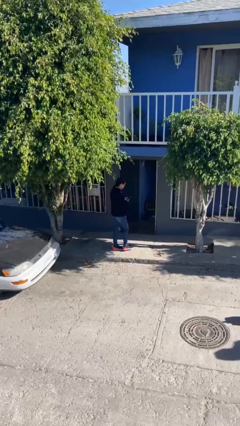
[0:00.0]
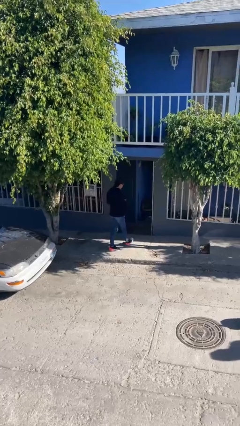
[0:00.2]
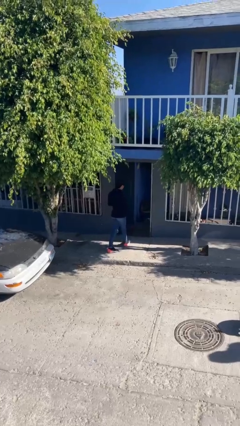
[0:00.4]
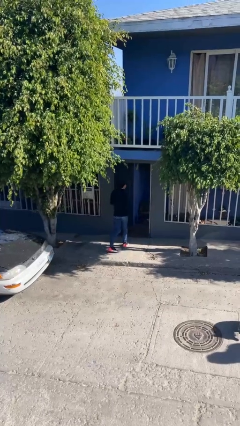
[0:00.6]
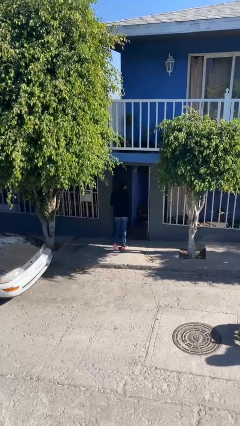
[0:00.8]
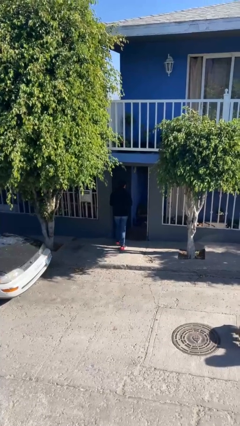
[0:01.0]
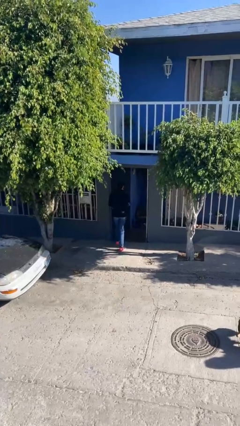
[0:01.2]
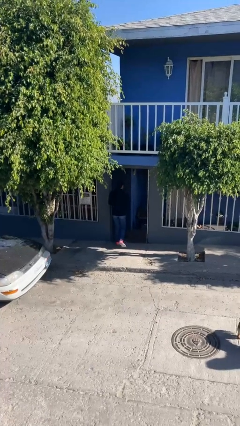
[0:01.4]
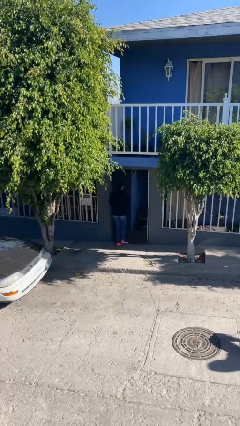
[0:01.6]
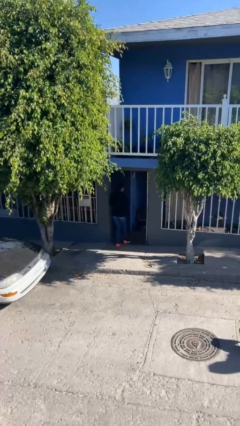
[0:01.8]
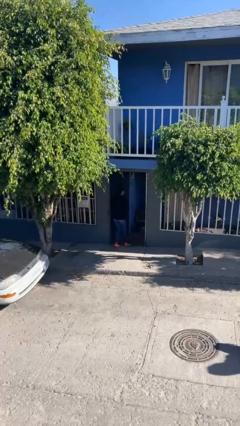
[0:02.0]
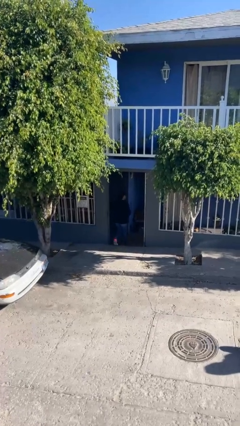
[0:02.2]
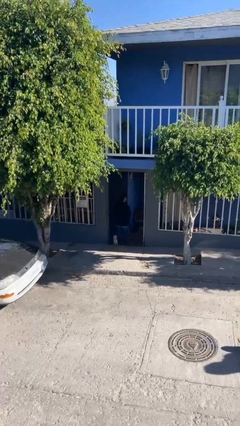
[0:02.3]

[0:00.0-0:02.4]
person exits scene through structure

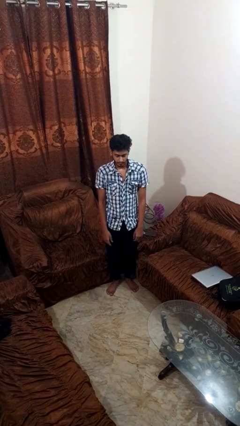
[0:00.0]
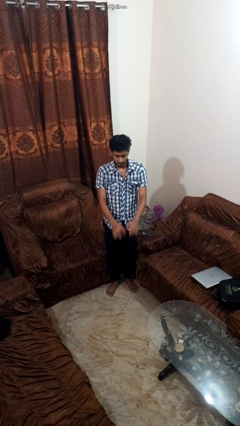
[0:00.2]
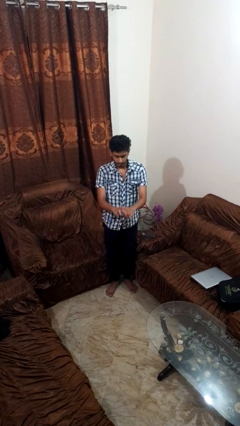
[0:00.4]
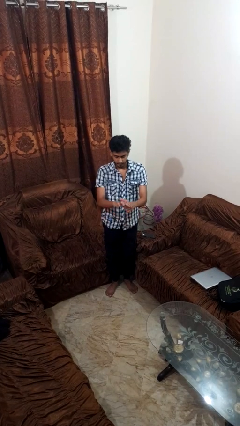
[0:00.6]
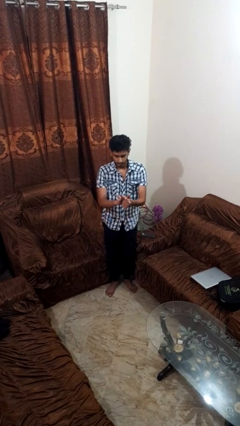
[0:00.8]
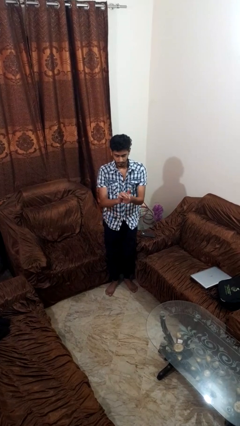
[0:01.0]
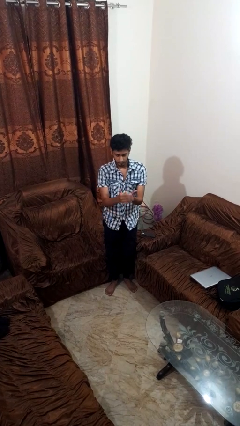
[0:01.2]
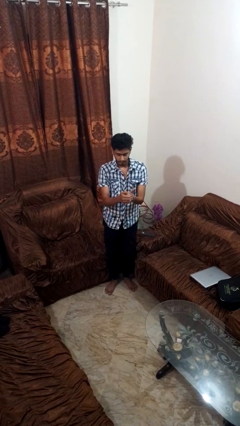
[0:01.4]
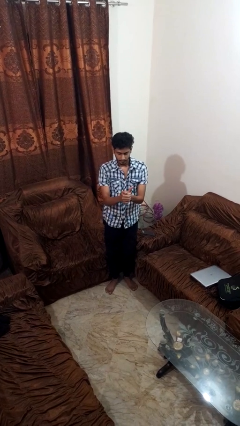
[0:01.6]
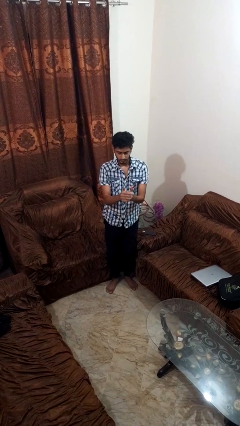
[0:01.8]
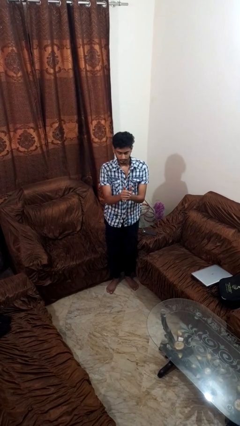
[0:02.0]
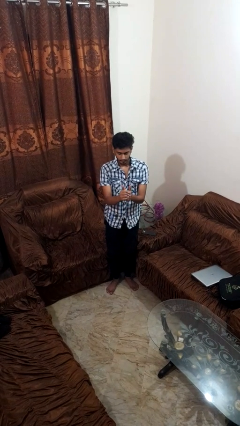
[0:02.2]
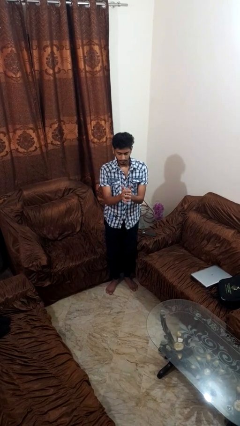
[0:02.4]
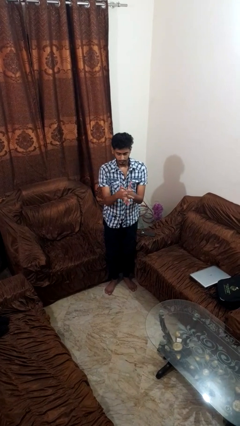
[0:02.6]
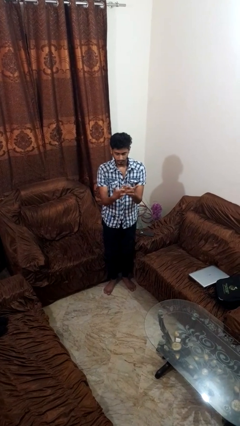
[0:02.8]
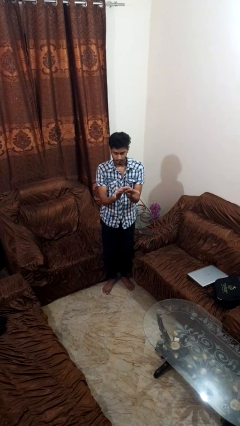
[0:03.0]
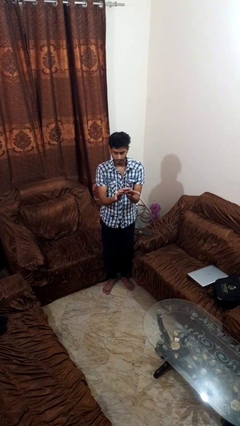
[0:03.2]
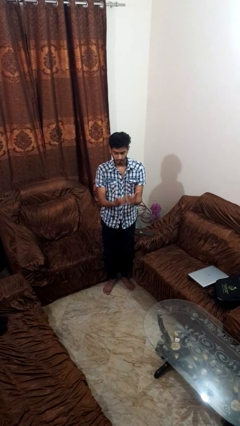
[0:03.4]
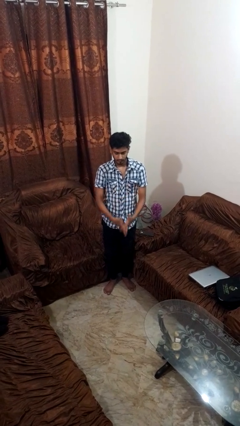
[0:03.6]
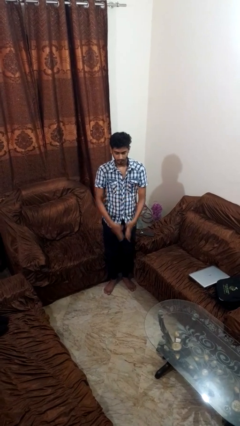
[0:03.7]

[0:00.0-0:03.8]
person cracks knuckles

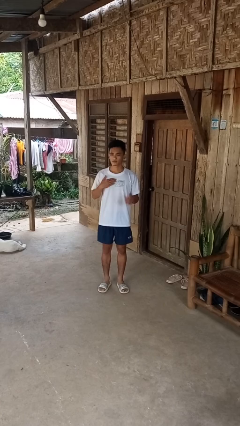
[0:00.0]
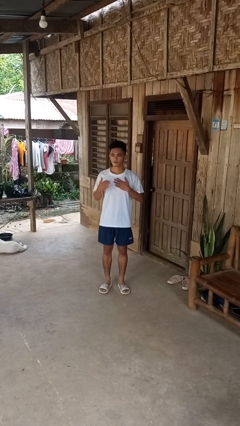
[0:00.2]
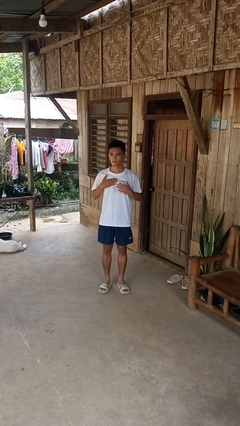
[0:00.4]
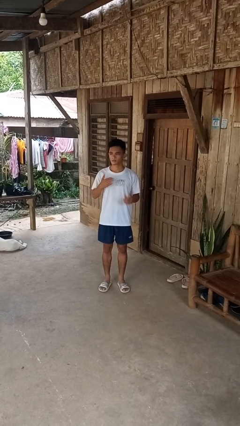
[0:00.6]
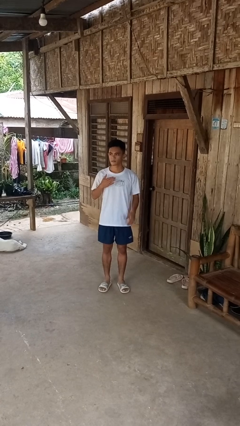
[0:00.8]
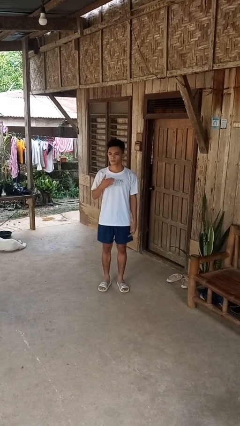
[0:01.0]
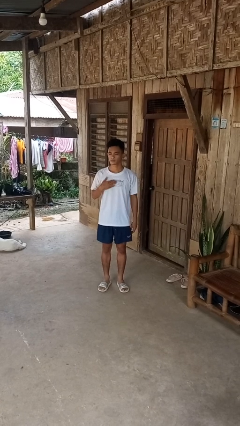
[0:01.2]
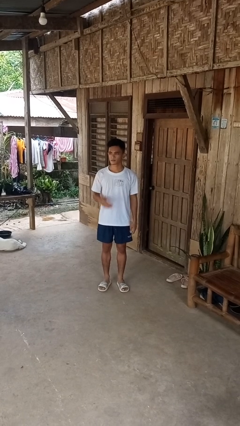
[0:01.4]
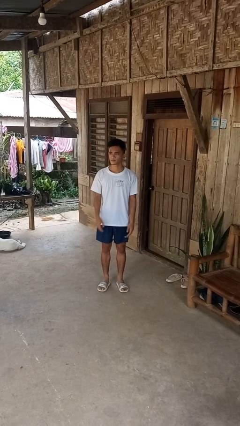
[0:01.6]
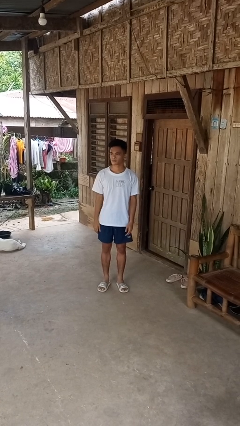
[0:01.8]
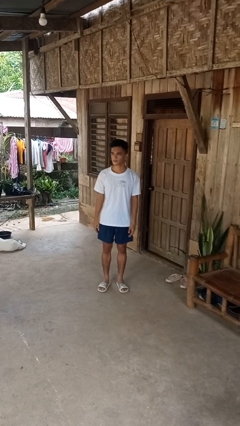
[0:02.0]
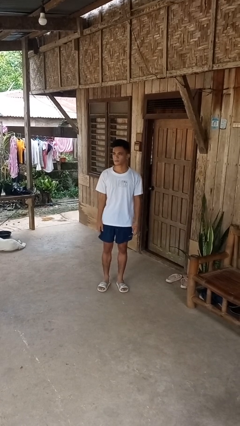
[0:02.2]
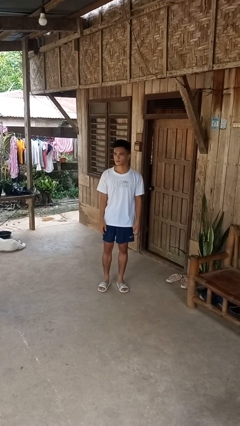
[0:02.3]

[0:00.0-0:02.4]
person drums on chest

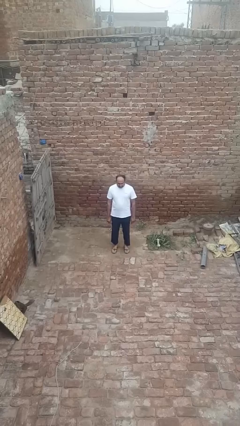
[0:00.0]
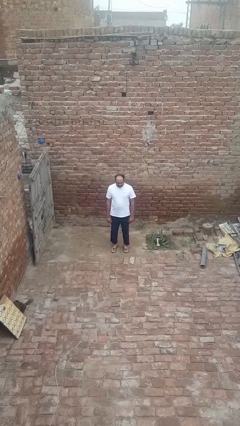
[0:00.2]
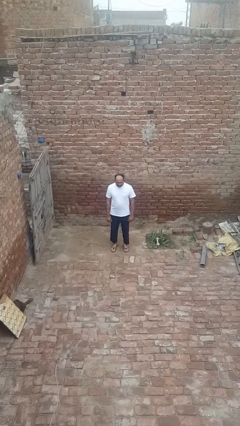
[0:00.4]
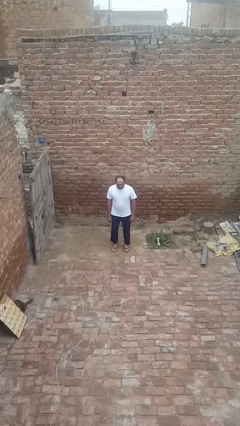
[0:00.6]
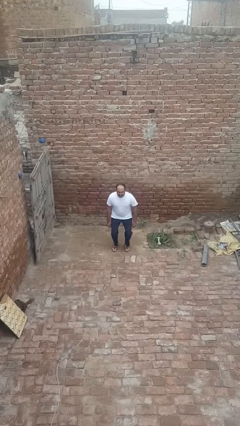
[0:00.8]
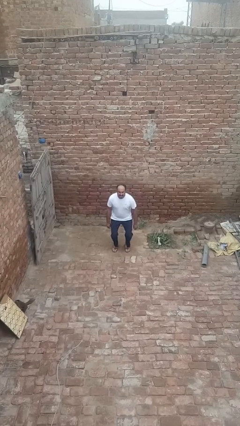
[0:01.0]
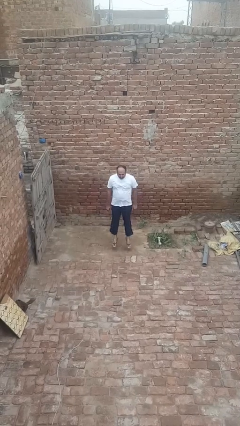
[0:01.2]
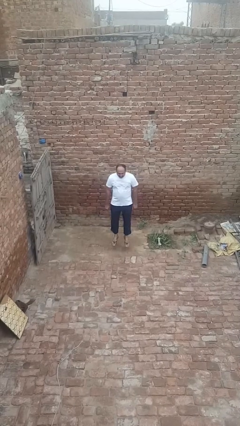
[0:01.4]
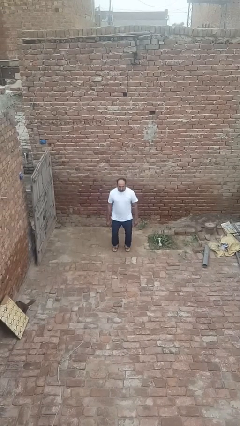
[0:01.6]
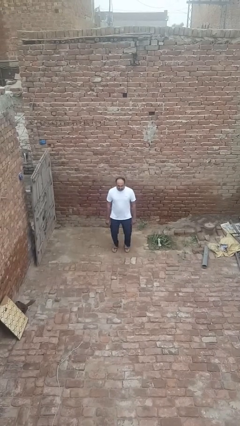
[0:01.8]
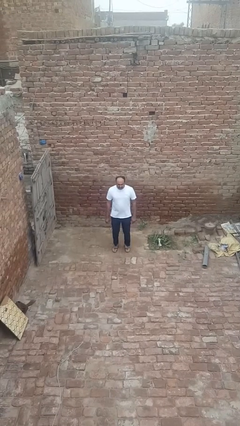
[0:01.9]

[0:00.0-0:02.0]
person jumps

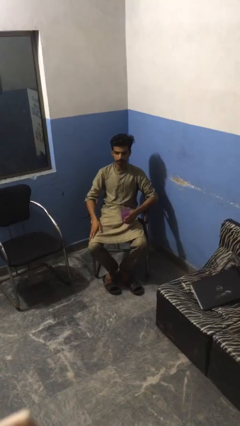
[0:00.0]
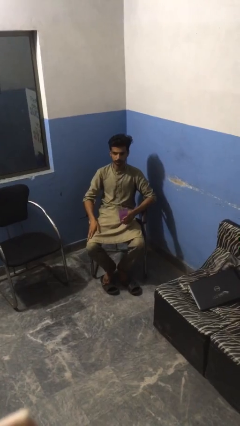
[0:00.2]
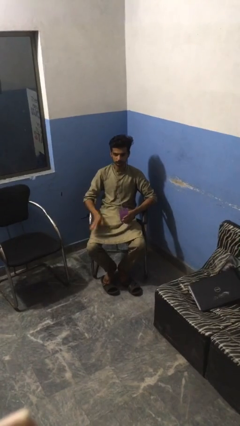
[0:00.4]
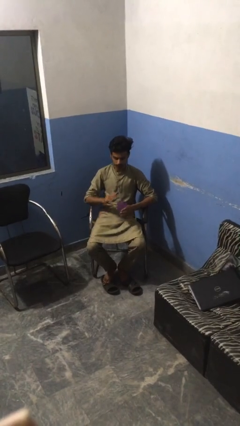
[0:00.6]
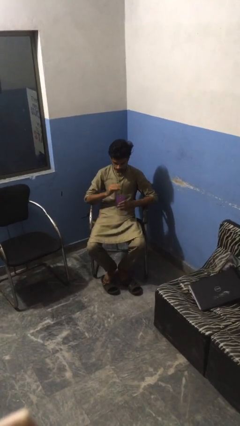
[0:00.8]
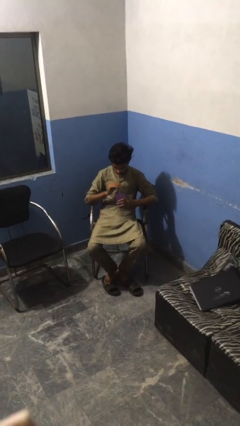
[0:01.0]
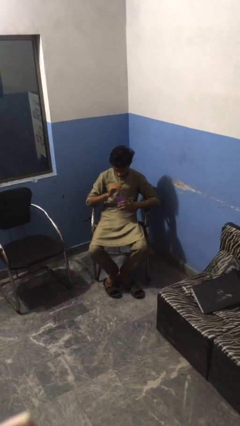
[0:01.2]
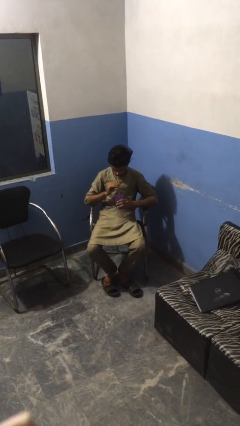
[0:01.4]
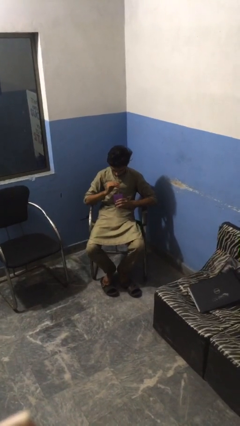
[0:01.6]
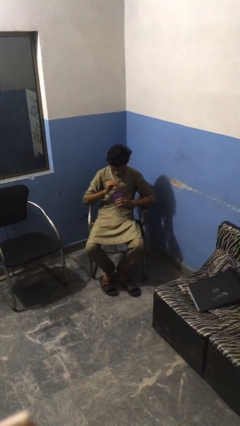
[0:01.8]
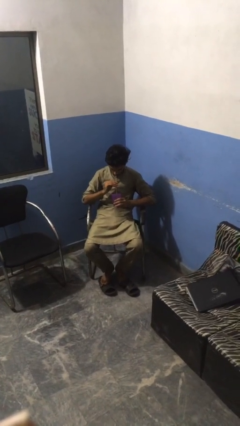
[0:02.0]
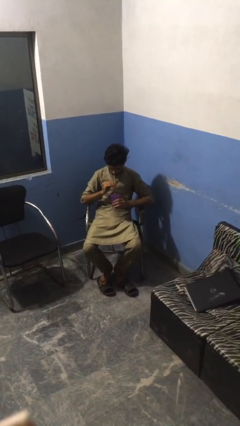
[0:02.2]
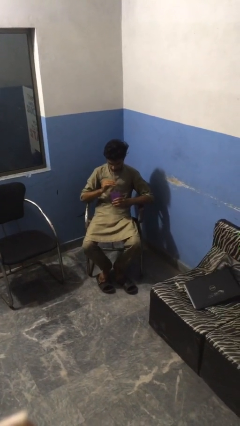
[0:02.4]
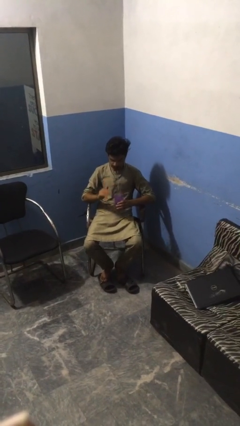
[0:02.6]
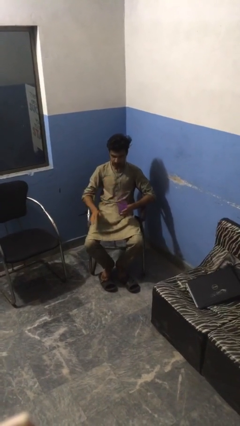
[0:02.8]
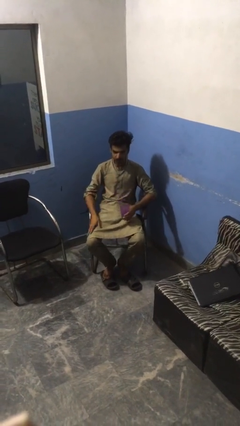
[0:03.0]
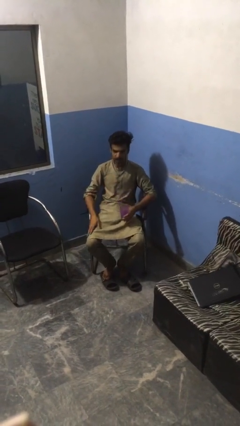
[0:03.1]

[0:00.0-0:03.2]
person drinks from straw

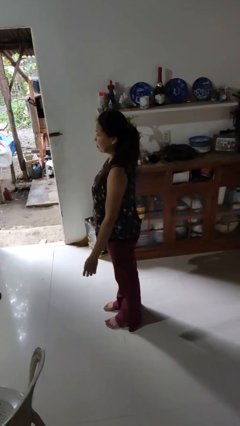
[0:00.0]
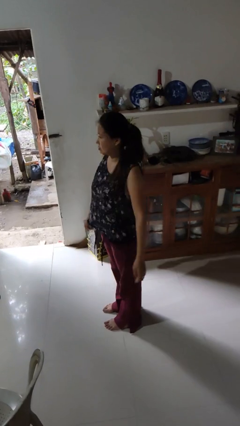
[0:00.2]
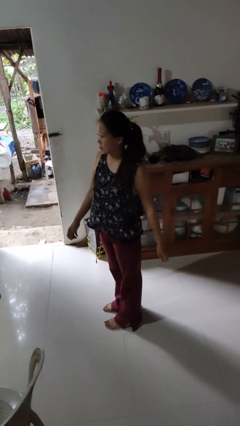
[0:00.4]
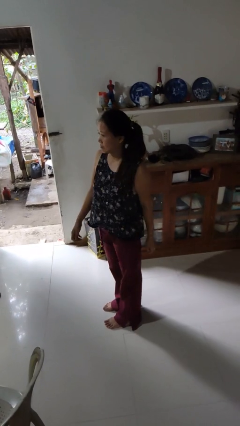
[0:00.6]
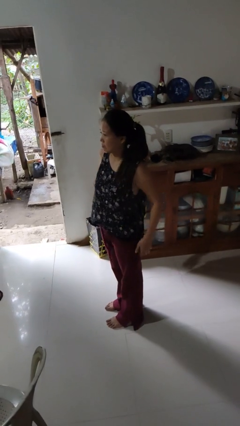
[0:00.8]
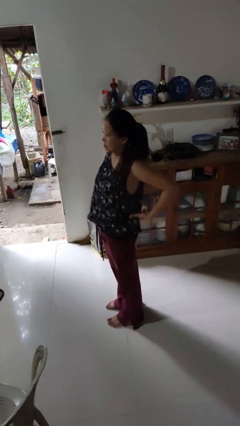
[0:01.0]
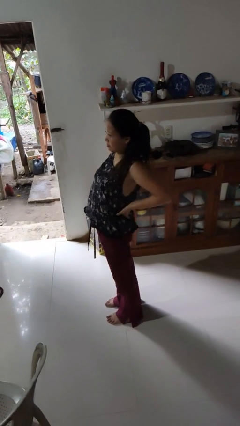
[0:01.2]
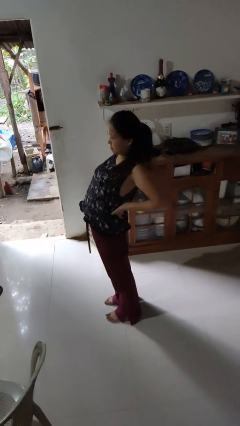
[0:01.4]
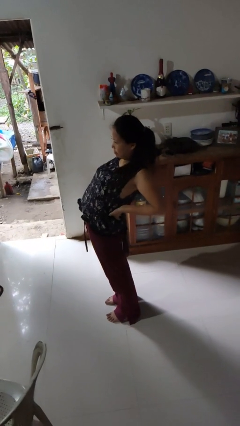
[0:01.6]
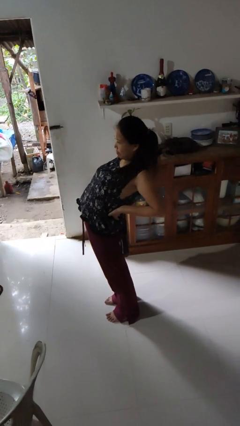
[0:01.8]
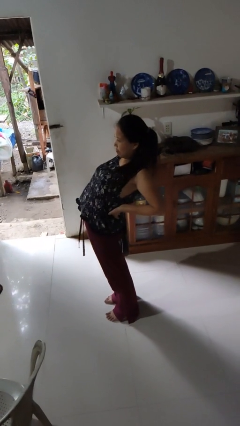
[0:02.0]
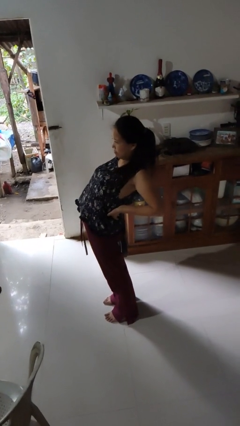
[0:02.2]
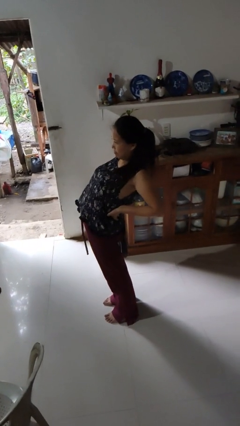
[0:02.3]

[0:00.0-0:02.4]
person stretches back

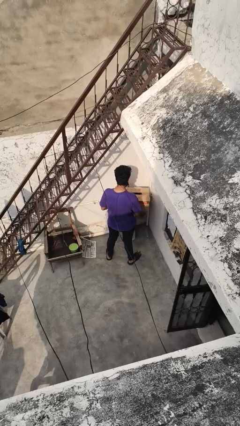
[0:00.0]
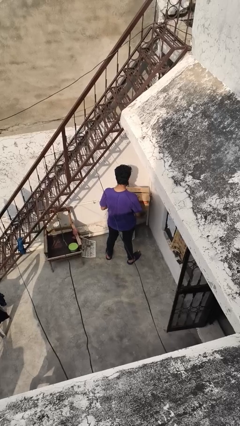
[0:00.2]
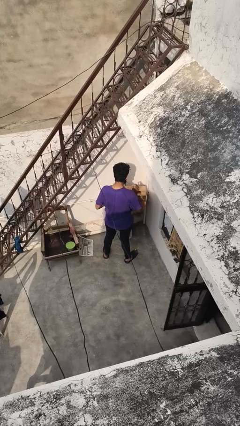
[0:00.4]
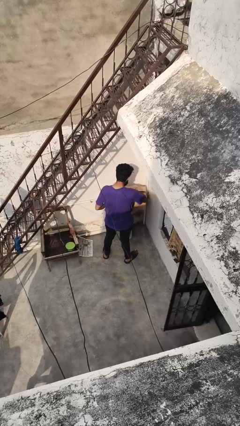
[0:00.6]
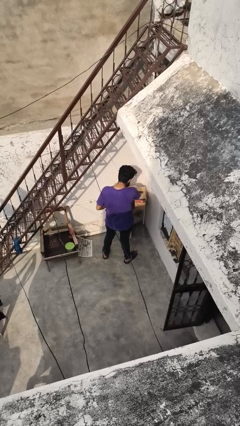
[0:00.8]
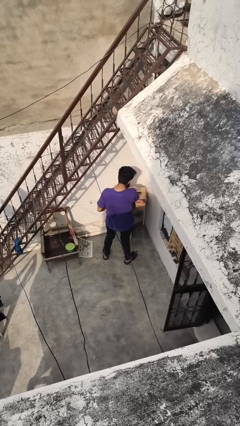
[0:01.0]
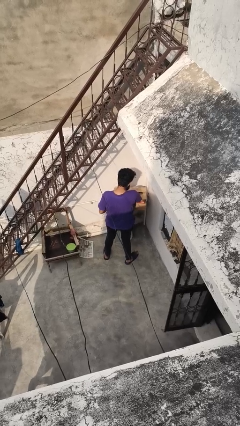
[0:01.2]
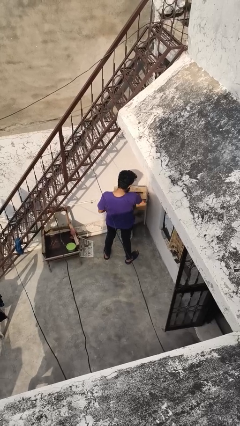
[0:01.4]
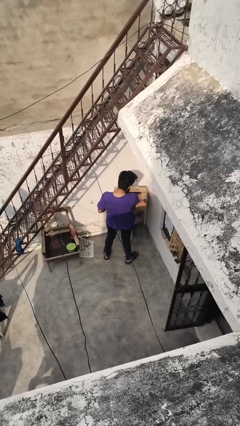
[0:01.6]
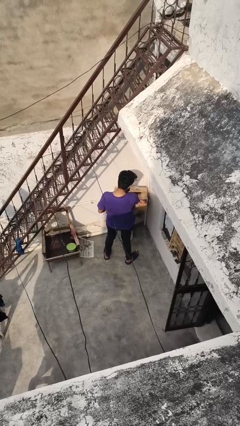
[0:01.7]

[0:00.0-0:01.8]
person searches in box
